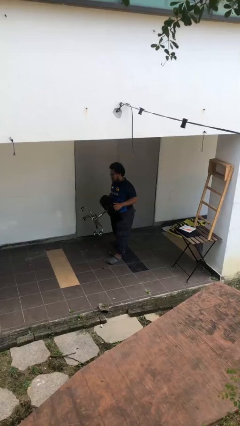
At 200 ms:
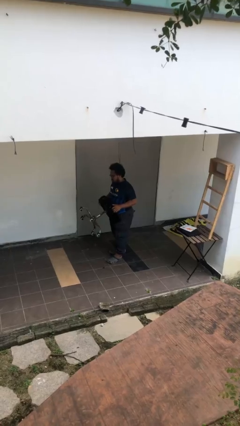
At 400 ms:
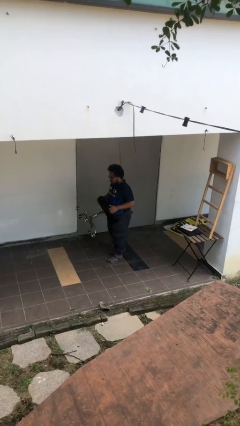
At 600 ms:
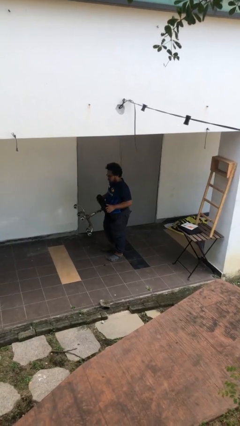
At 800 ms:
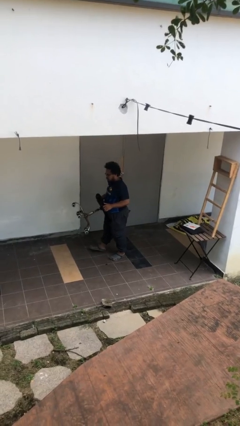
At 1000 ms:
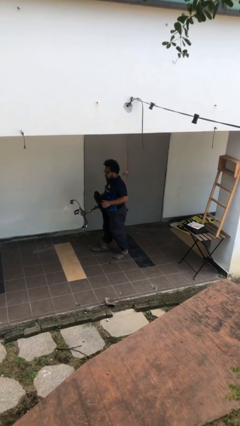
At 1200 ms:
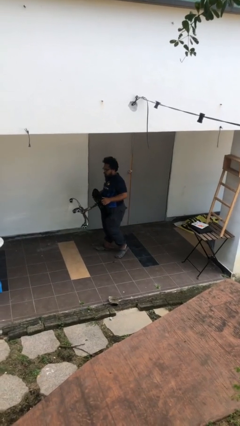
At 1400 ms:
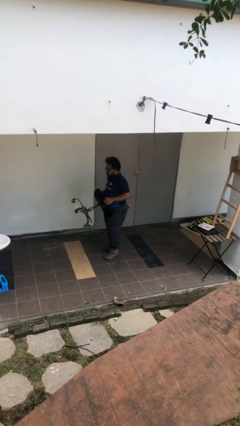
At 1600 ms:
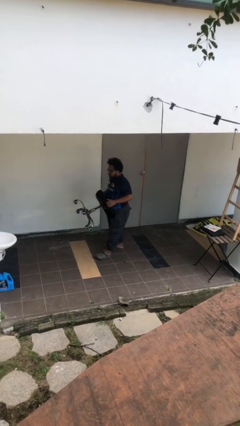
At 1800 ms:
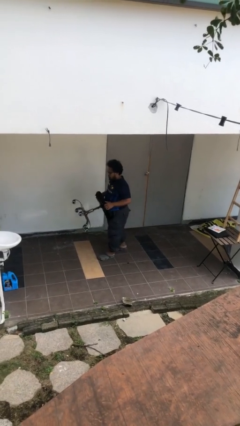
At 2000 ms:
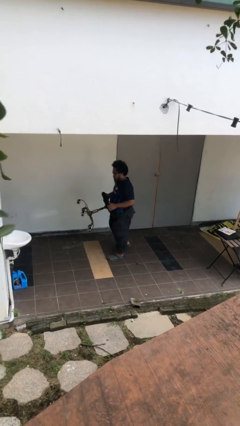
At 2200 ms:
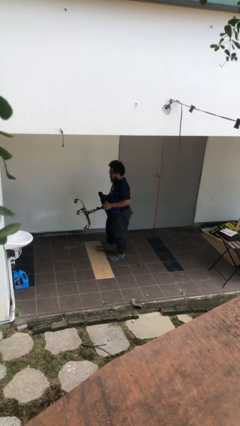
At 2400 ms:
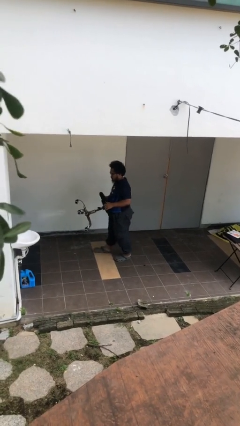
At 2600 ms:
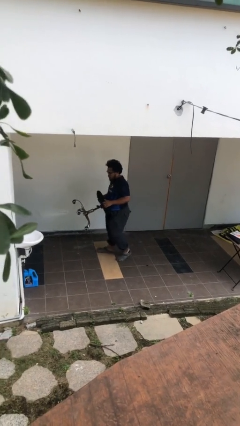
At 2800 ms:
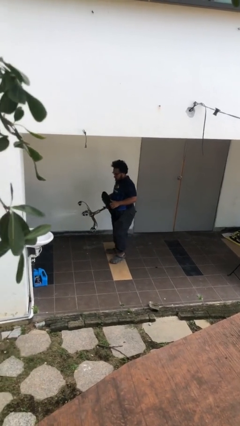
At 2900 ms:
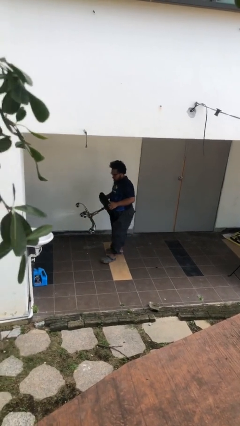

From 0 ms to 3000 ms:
person carries heavy object

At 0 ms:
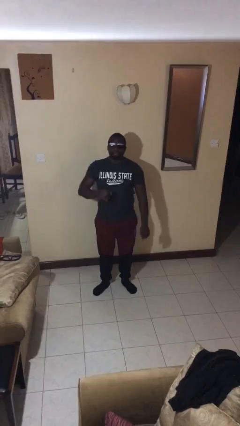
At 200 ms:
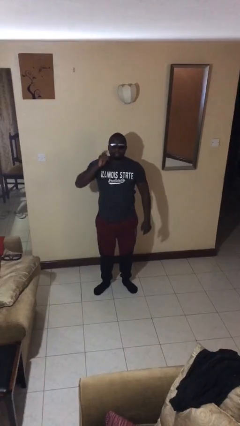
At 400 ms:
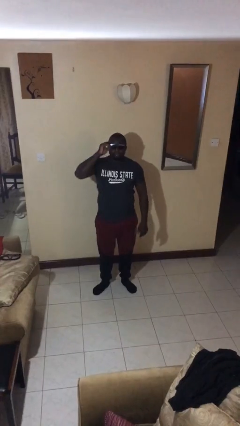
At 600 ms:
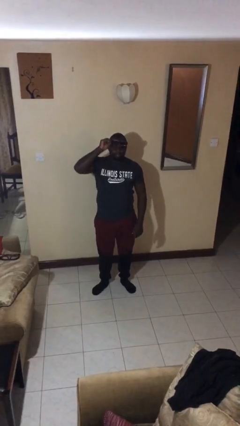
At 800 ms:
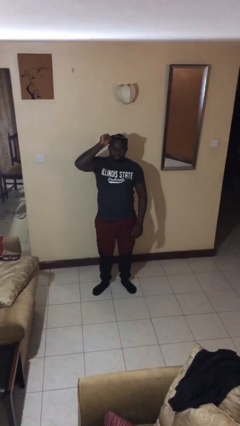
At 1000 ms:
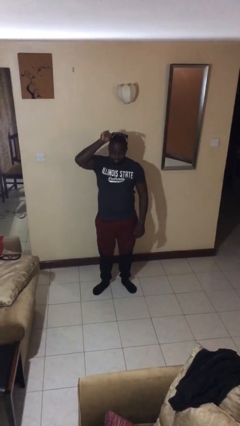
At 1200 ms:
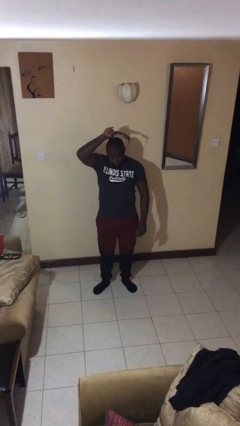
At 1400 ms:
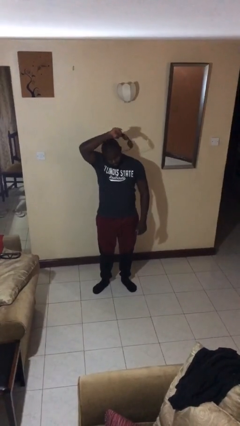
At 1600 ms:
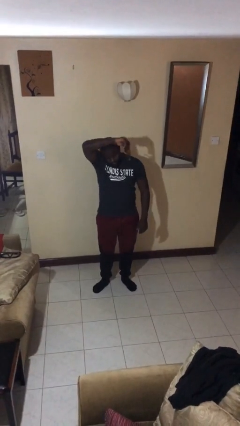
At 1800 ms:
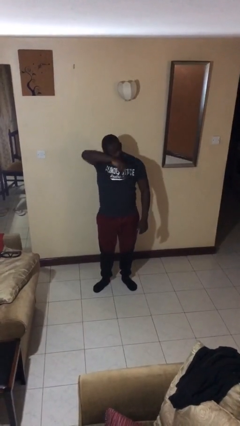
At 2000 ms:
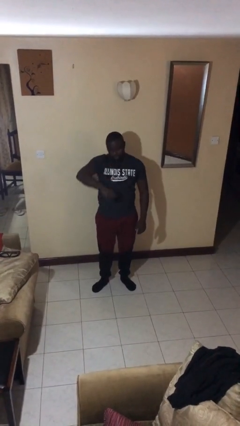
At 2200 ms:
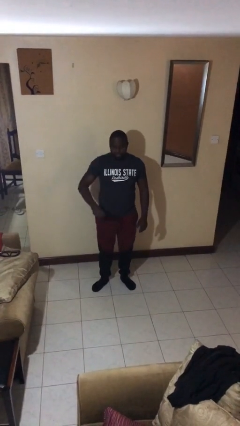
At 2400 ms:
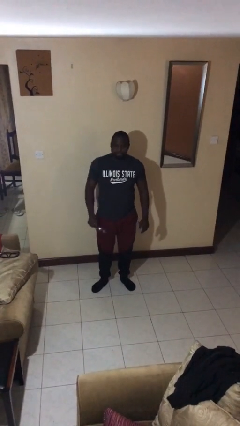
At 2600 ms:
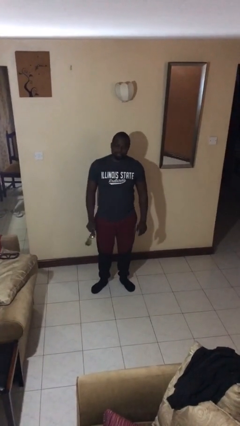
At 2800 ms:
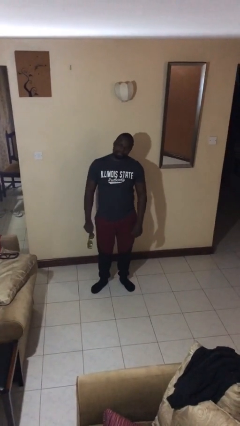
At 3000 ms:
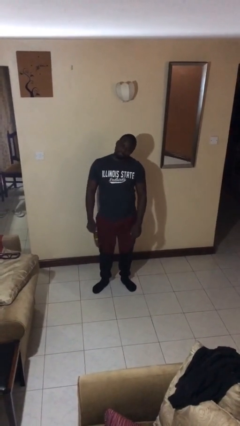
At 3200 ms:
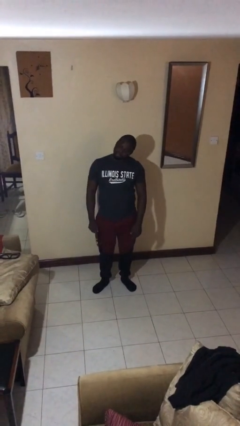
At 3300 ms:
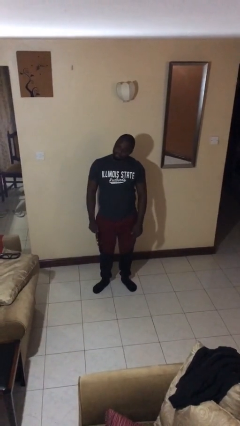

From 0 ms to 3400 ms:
person takes off sunglasses

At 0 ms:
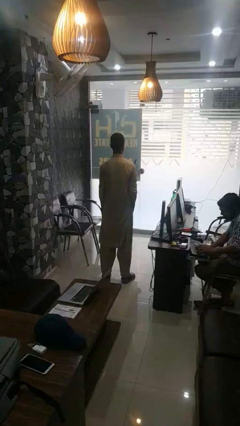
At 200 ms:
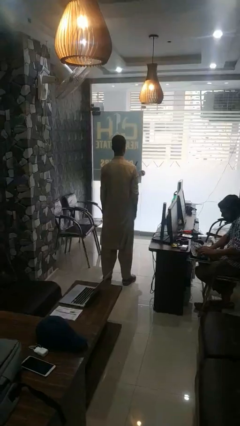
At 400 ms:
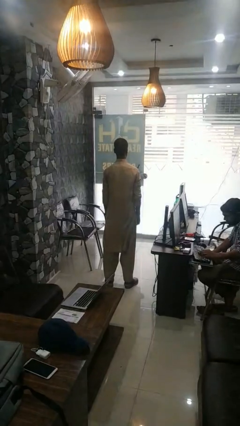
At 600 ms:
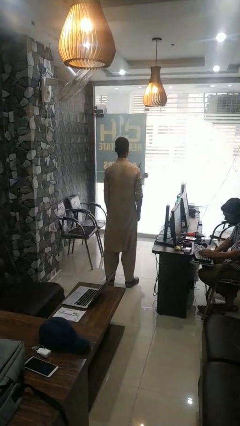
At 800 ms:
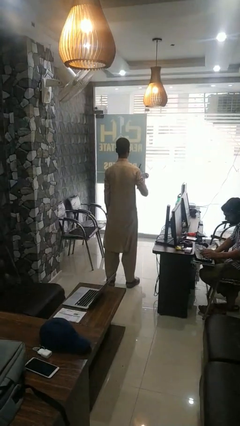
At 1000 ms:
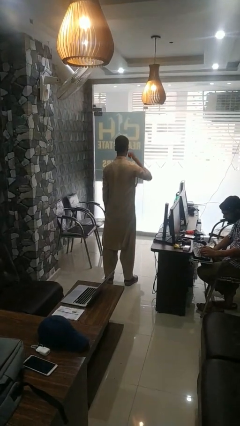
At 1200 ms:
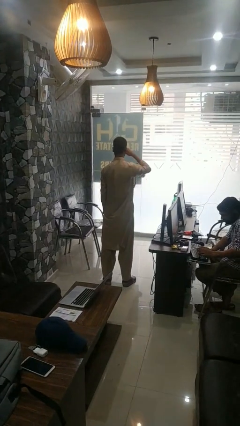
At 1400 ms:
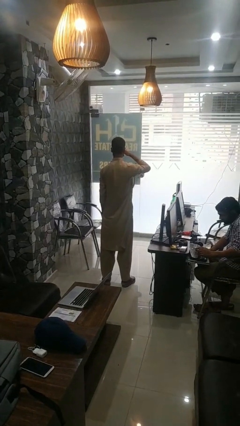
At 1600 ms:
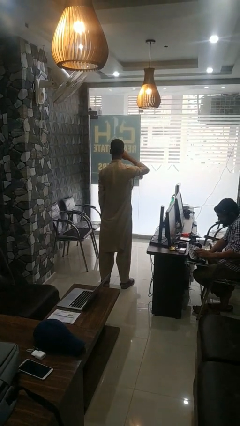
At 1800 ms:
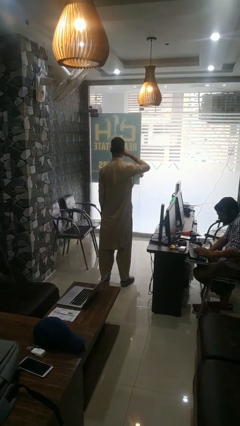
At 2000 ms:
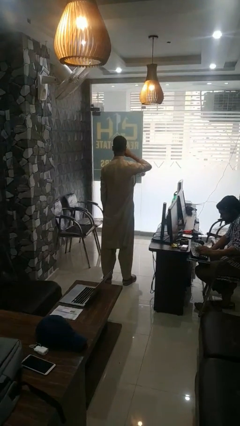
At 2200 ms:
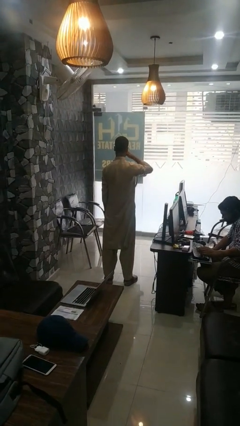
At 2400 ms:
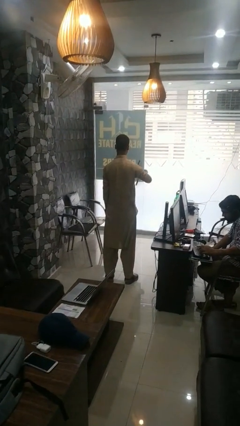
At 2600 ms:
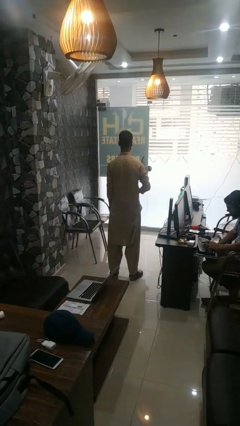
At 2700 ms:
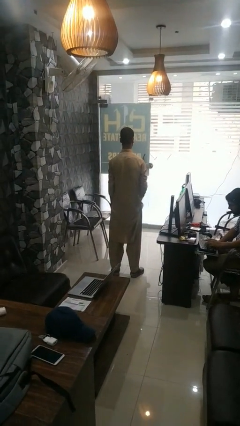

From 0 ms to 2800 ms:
person rubs eyes

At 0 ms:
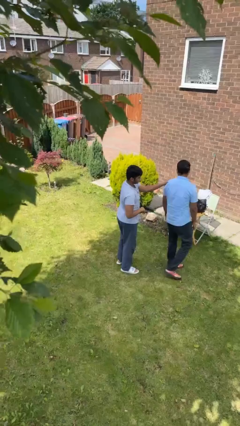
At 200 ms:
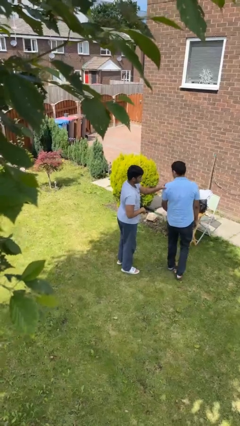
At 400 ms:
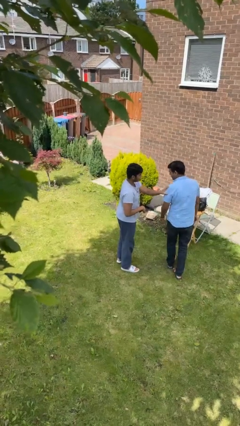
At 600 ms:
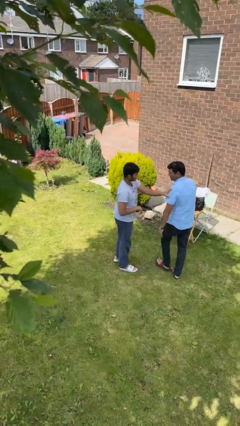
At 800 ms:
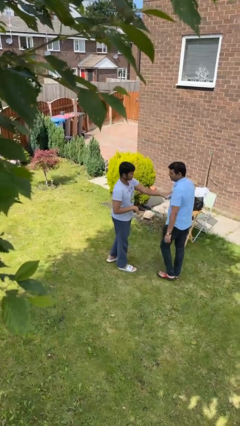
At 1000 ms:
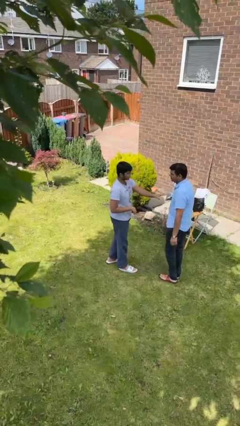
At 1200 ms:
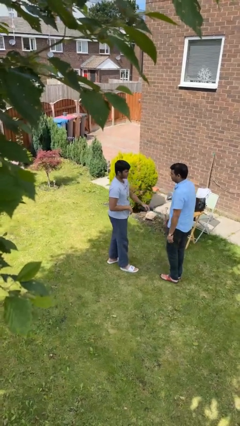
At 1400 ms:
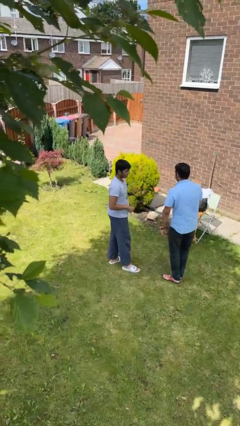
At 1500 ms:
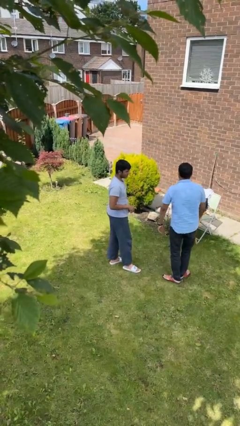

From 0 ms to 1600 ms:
person spins person around

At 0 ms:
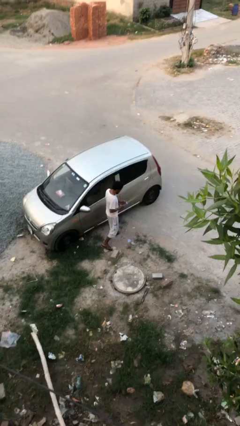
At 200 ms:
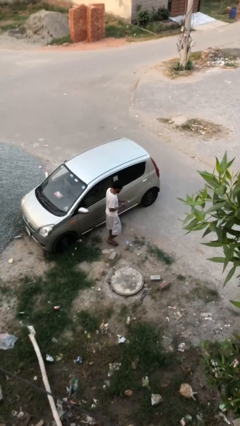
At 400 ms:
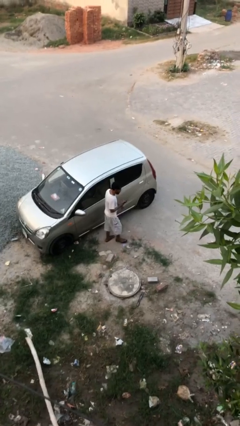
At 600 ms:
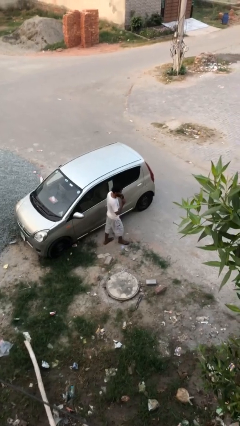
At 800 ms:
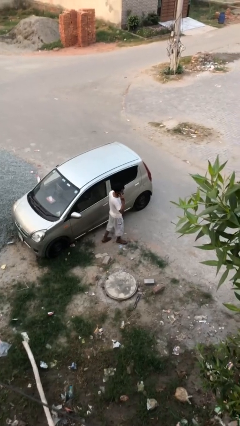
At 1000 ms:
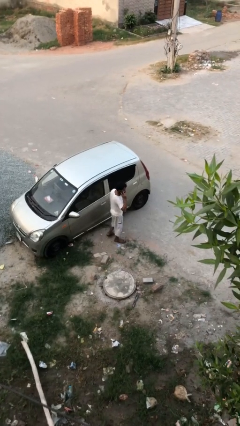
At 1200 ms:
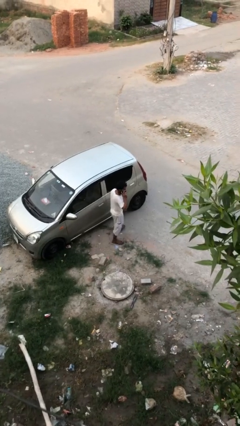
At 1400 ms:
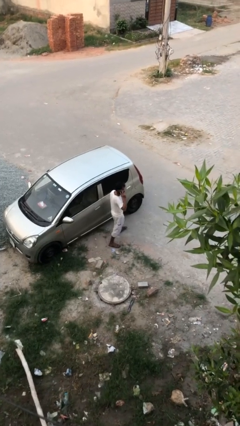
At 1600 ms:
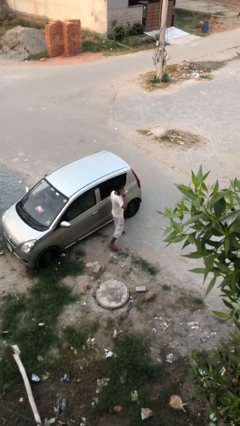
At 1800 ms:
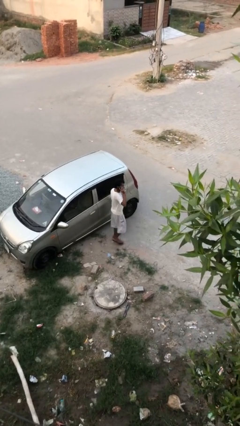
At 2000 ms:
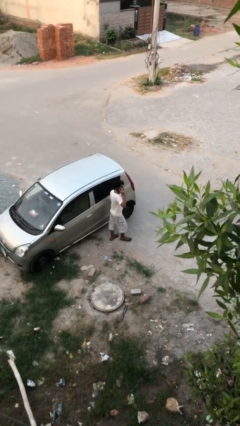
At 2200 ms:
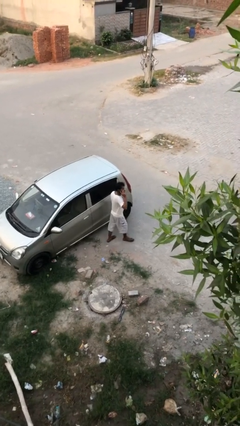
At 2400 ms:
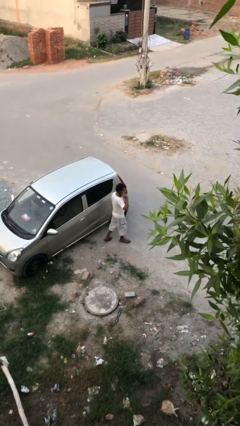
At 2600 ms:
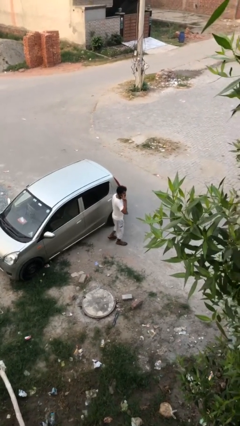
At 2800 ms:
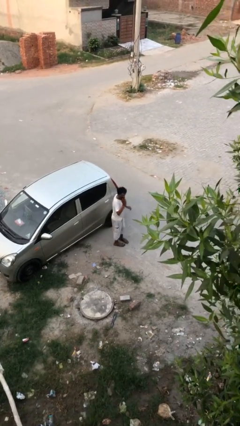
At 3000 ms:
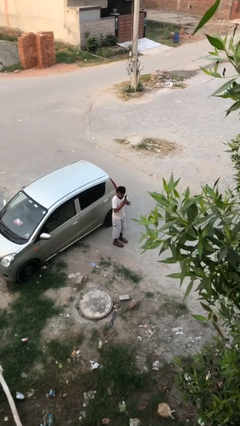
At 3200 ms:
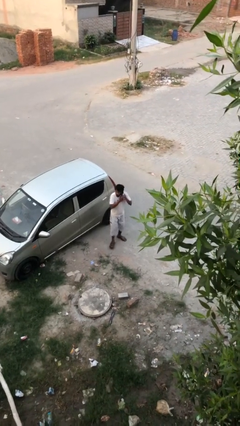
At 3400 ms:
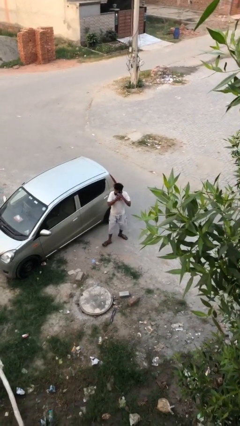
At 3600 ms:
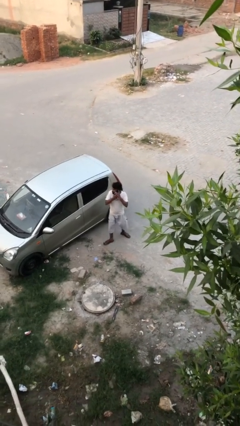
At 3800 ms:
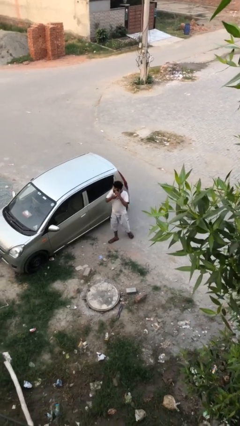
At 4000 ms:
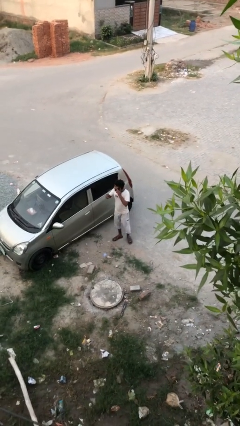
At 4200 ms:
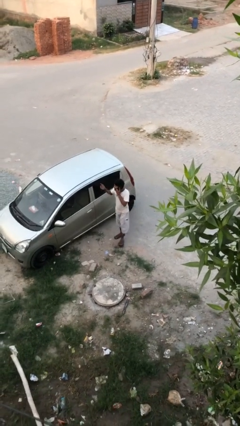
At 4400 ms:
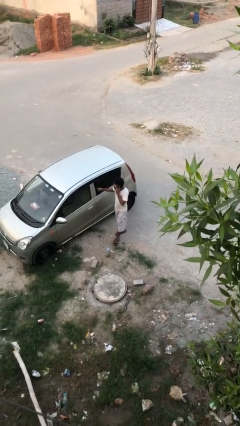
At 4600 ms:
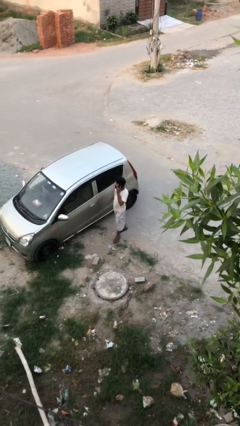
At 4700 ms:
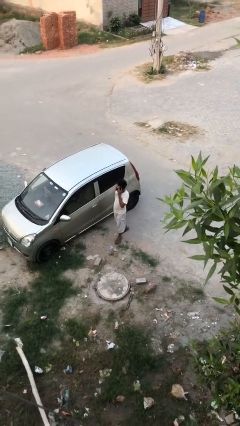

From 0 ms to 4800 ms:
person talks on phone

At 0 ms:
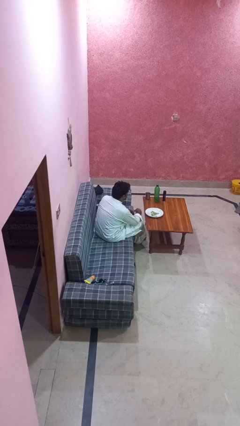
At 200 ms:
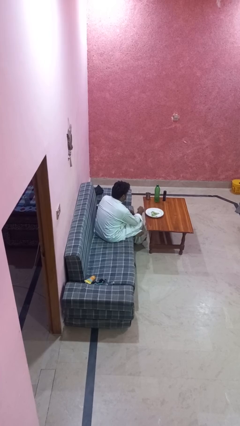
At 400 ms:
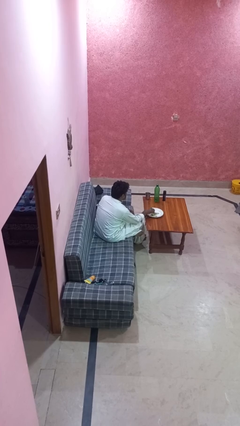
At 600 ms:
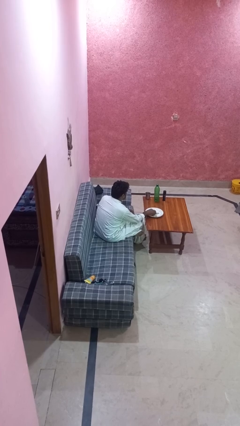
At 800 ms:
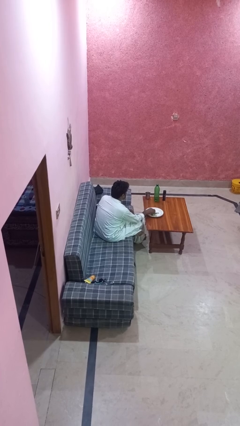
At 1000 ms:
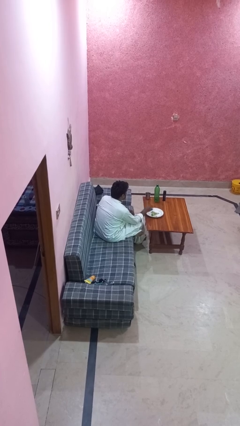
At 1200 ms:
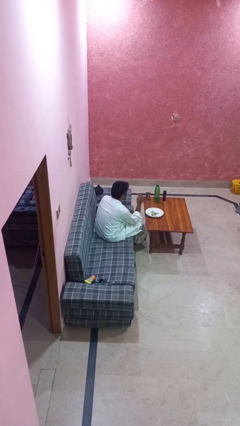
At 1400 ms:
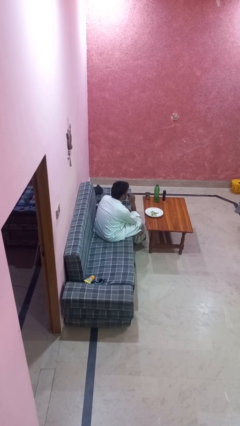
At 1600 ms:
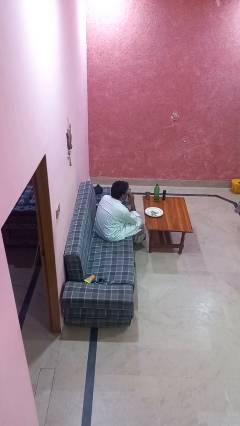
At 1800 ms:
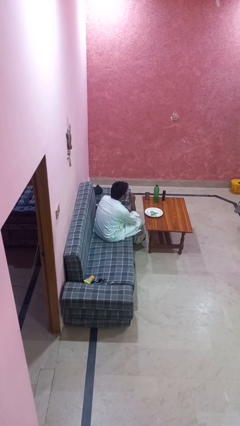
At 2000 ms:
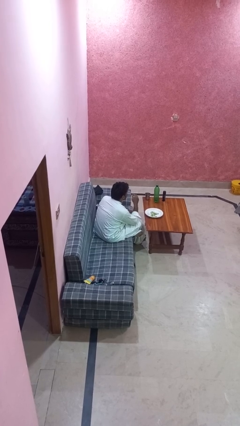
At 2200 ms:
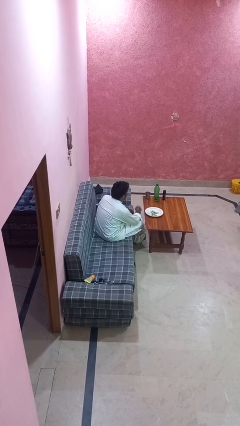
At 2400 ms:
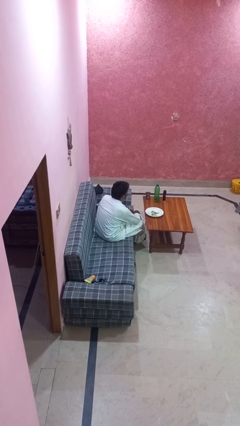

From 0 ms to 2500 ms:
person eats with hands
